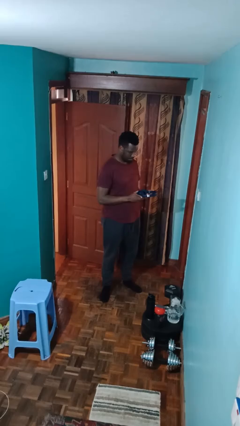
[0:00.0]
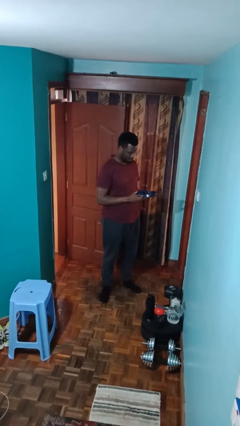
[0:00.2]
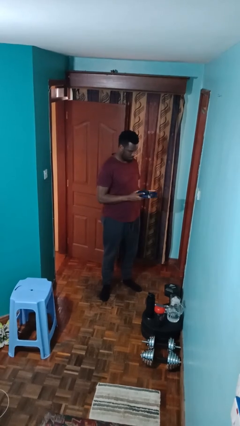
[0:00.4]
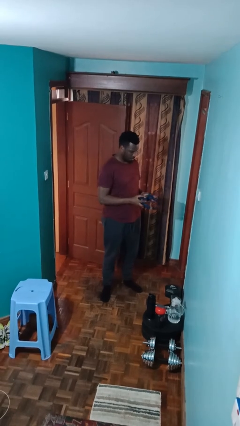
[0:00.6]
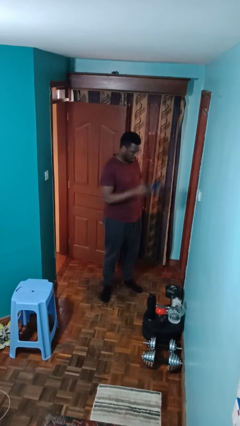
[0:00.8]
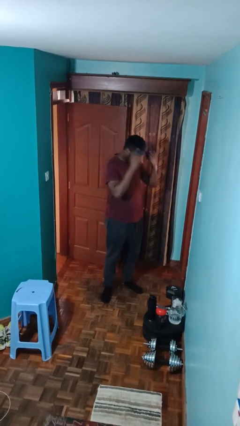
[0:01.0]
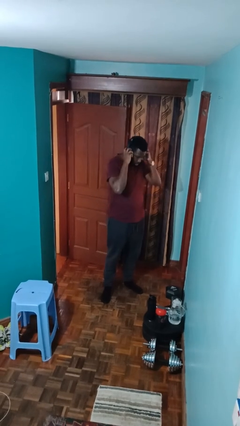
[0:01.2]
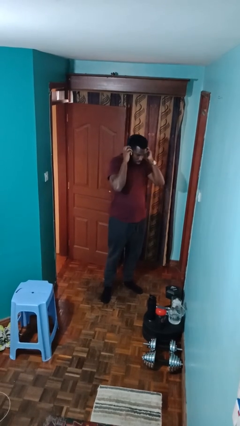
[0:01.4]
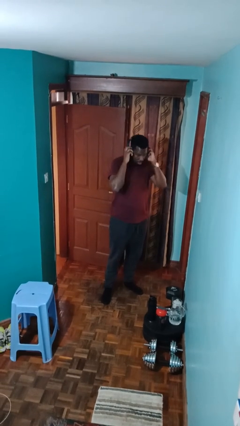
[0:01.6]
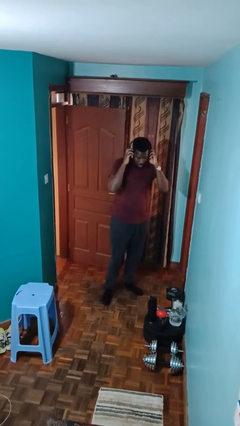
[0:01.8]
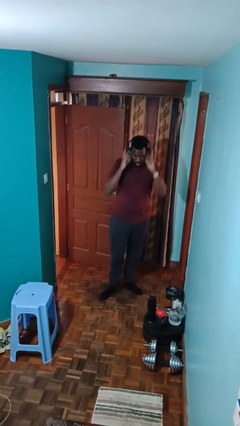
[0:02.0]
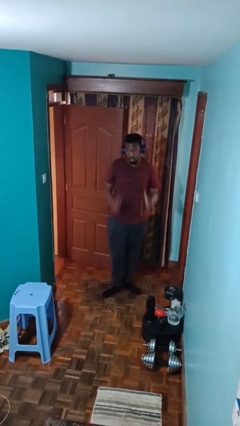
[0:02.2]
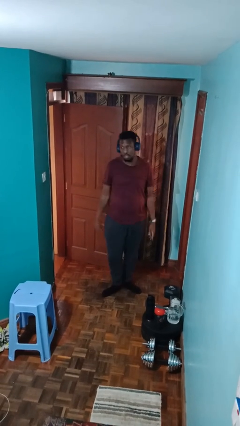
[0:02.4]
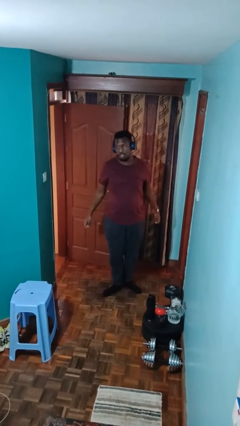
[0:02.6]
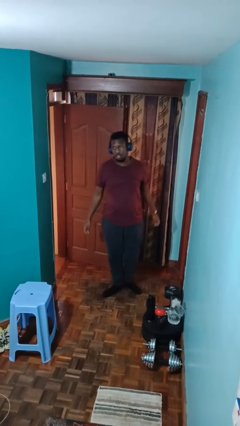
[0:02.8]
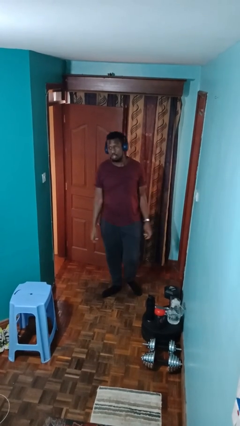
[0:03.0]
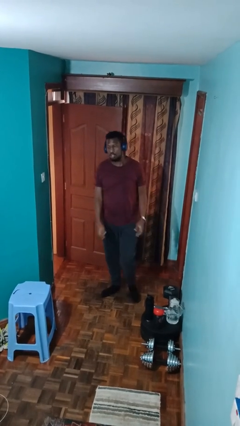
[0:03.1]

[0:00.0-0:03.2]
person puts on headphones

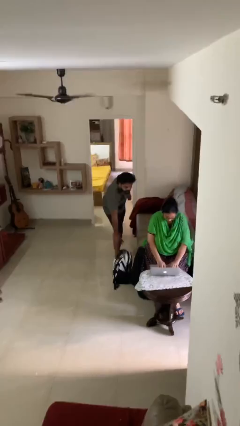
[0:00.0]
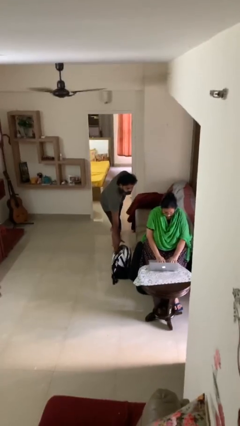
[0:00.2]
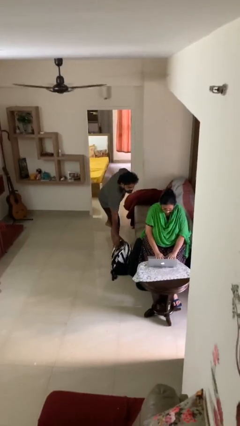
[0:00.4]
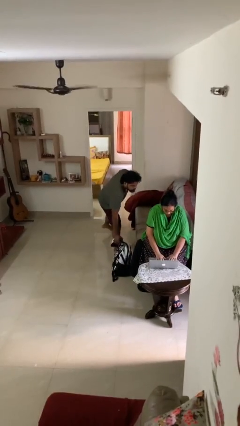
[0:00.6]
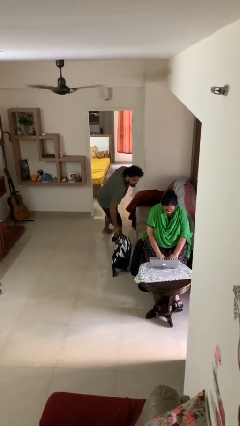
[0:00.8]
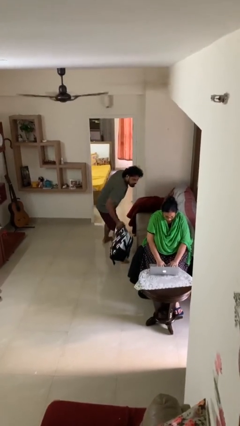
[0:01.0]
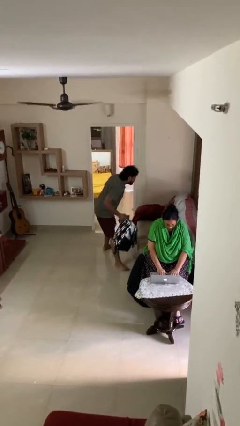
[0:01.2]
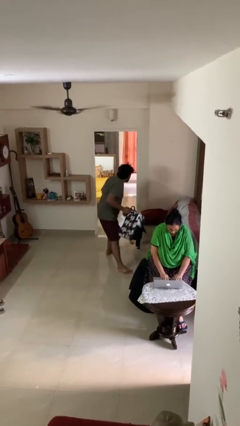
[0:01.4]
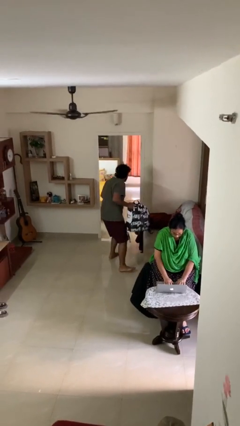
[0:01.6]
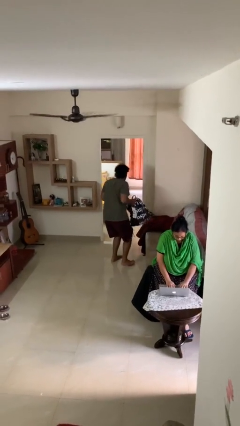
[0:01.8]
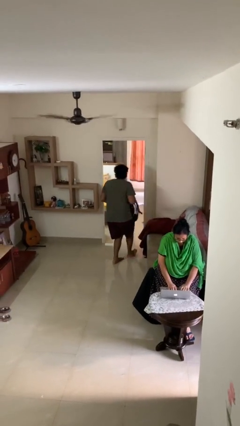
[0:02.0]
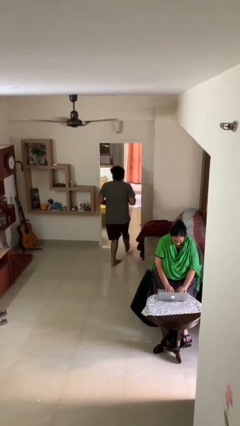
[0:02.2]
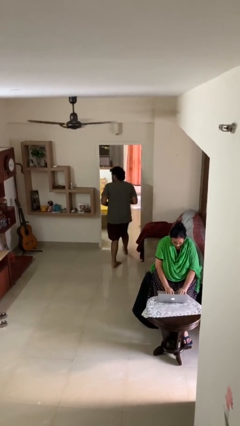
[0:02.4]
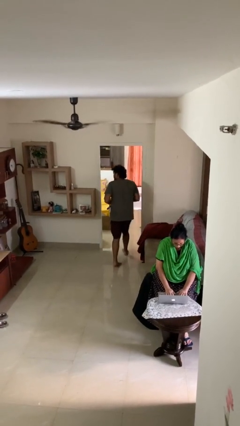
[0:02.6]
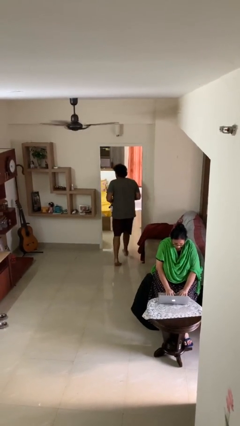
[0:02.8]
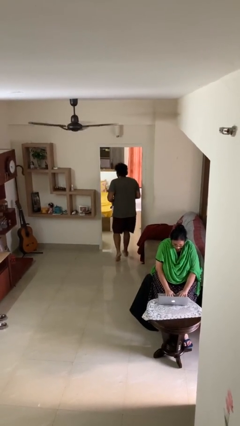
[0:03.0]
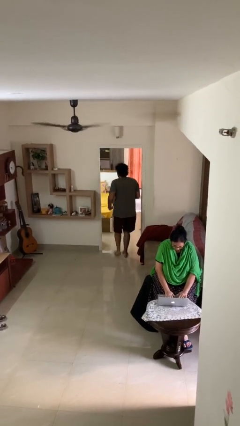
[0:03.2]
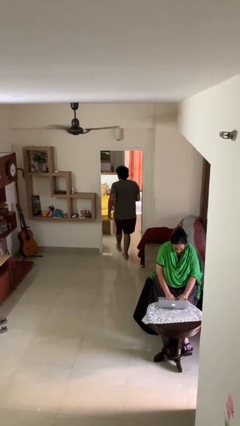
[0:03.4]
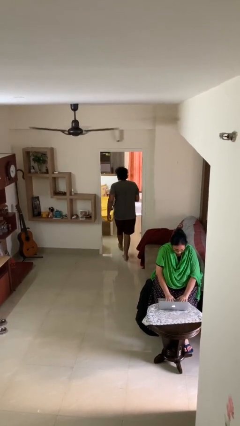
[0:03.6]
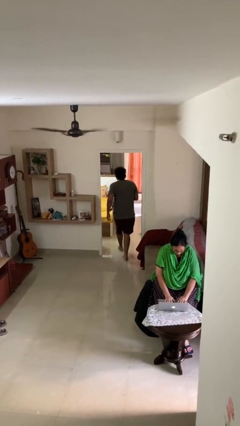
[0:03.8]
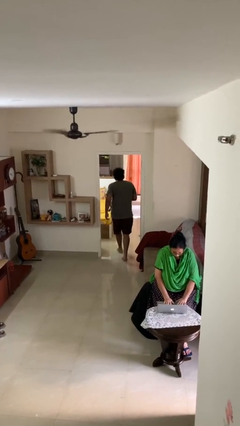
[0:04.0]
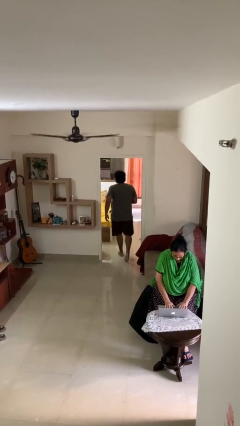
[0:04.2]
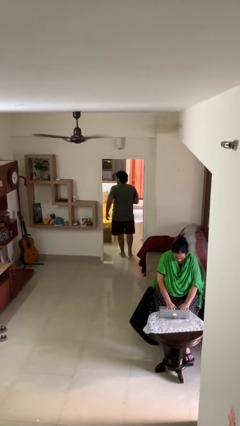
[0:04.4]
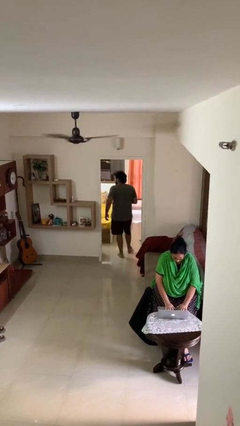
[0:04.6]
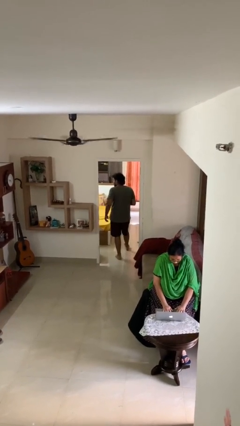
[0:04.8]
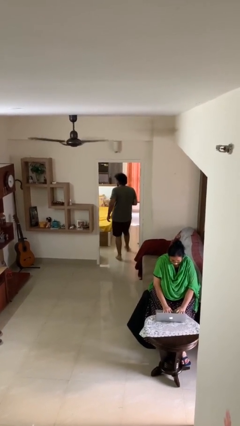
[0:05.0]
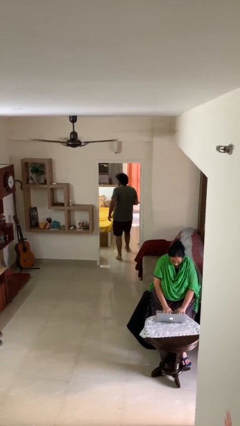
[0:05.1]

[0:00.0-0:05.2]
person steals object from person

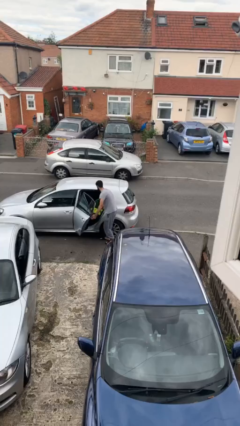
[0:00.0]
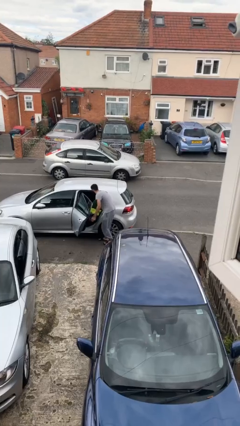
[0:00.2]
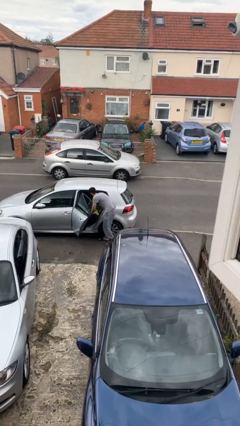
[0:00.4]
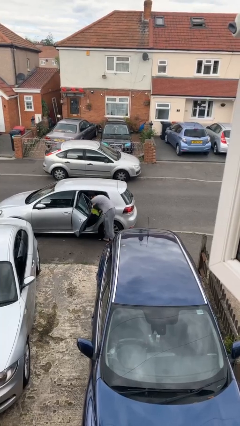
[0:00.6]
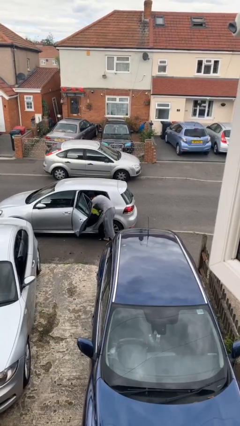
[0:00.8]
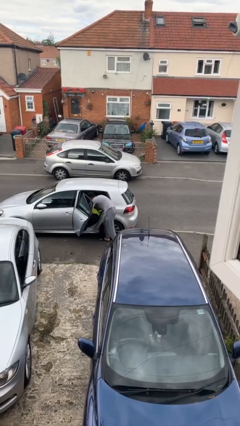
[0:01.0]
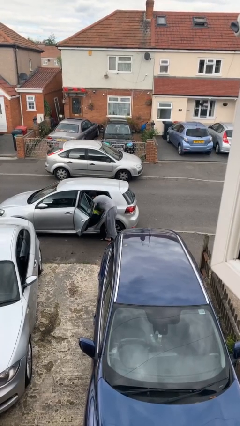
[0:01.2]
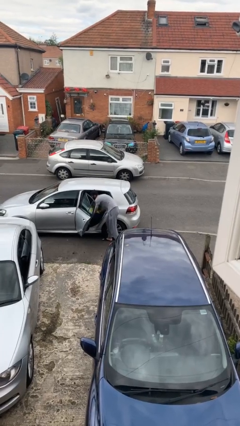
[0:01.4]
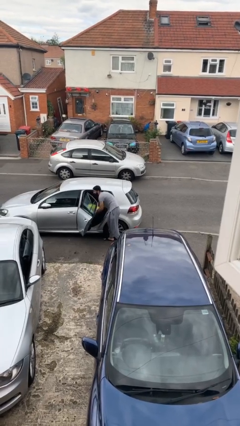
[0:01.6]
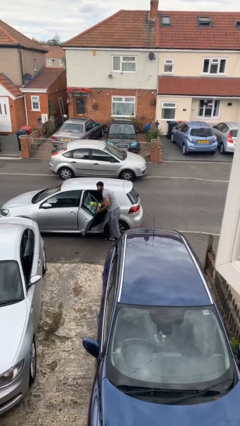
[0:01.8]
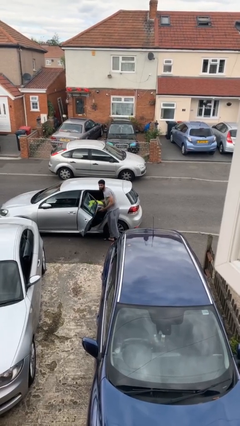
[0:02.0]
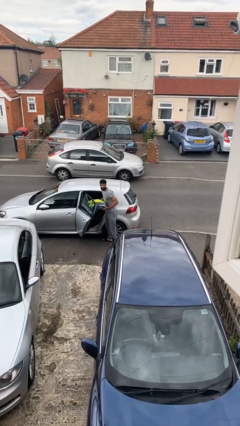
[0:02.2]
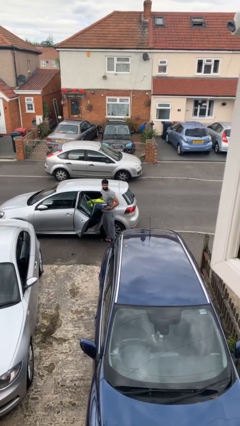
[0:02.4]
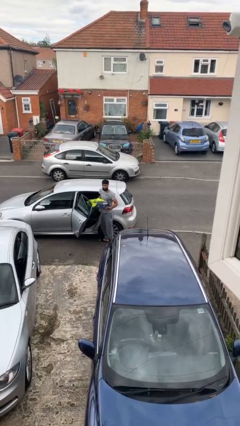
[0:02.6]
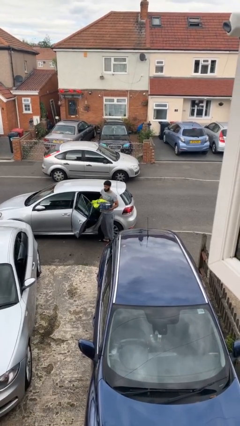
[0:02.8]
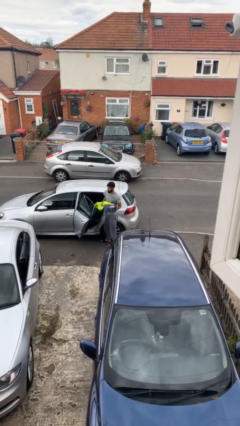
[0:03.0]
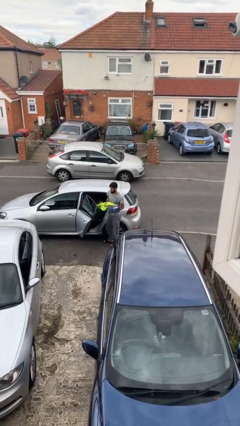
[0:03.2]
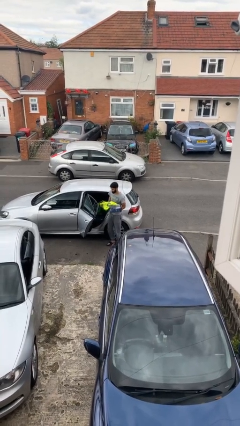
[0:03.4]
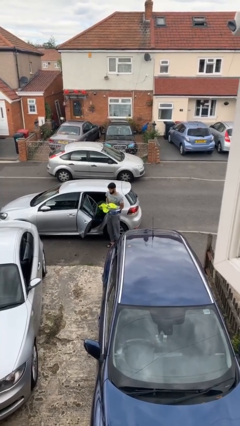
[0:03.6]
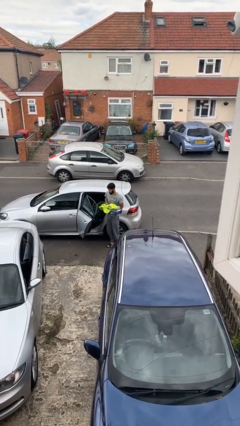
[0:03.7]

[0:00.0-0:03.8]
person unloads car

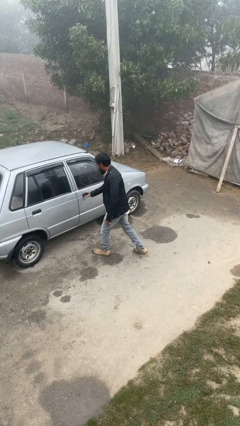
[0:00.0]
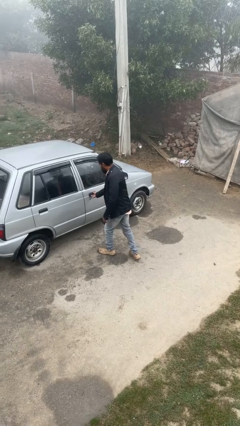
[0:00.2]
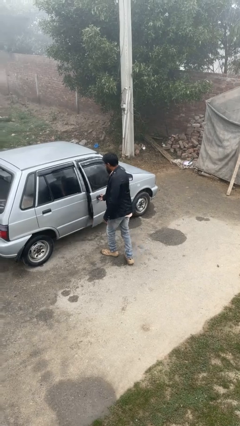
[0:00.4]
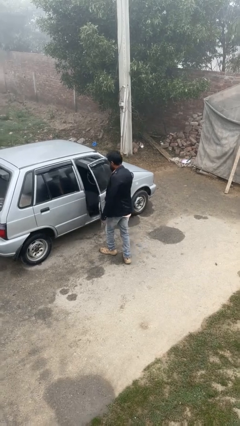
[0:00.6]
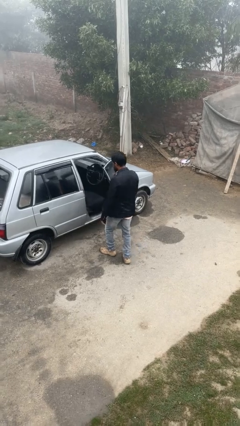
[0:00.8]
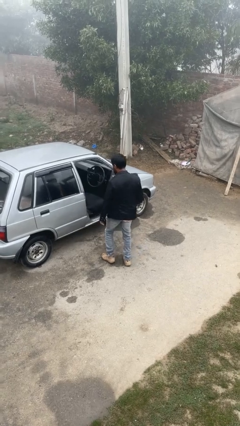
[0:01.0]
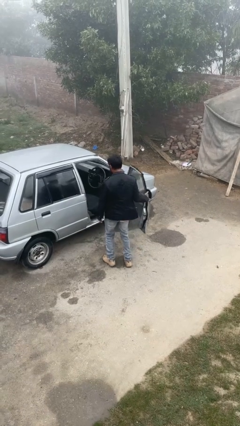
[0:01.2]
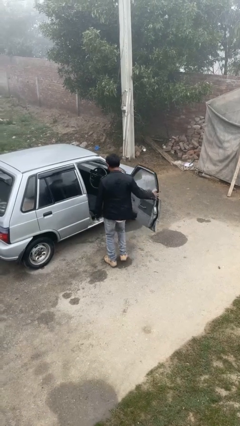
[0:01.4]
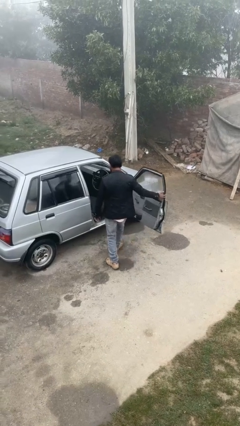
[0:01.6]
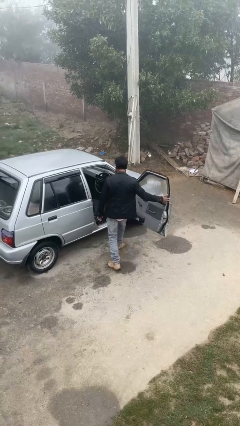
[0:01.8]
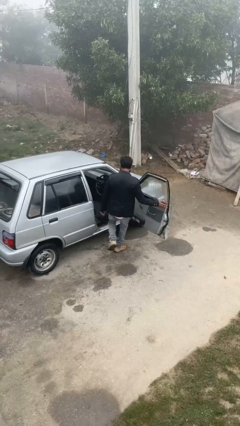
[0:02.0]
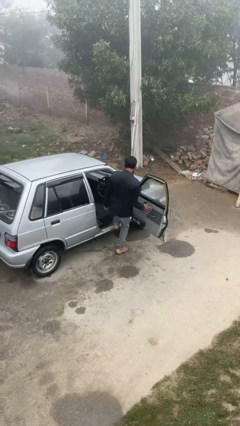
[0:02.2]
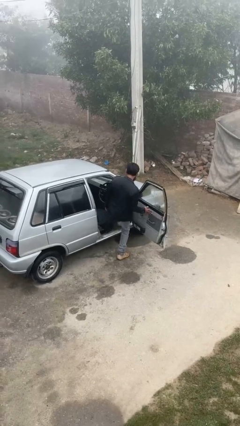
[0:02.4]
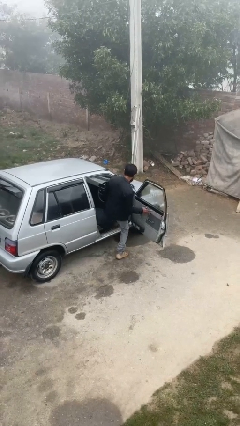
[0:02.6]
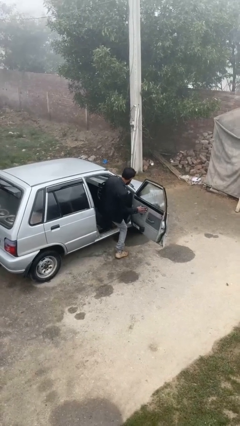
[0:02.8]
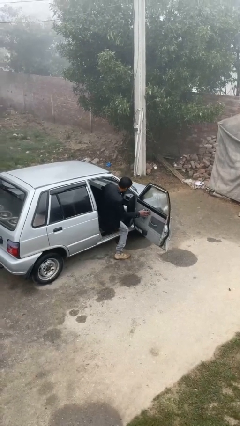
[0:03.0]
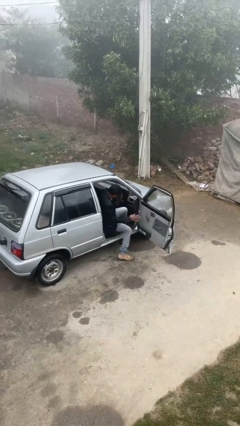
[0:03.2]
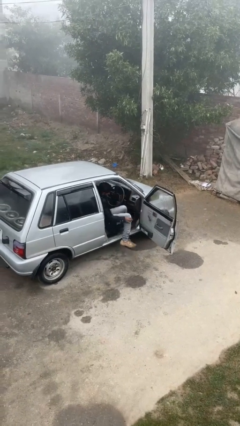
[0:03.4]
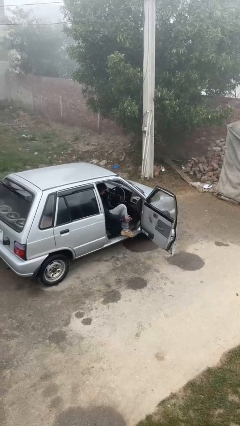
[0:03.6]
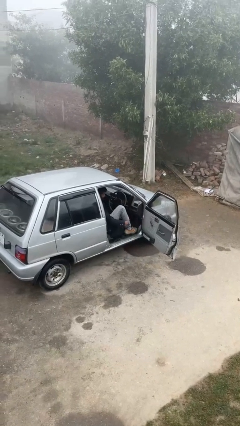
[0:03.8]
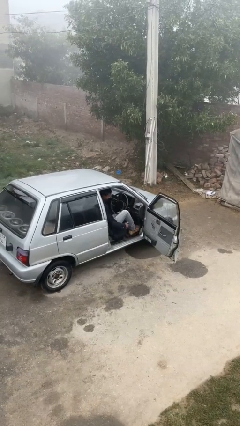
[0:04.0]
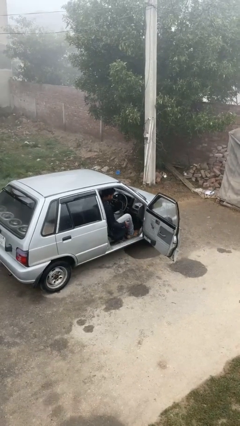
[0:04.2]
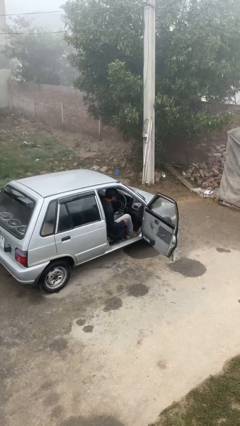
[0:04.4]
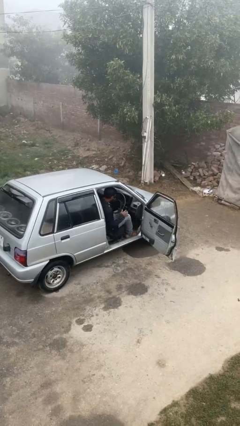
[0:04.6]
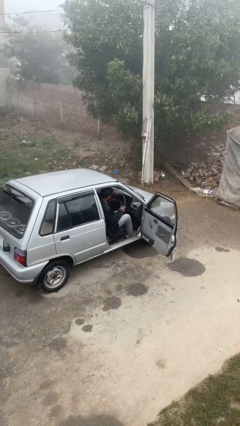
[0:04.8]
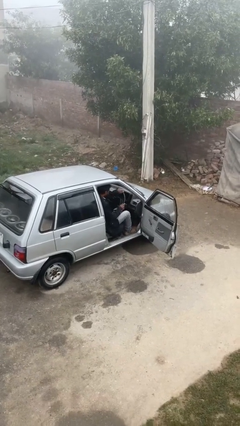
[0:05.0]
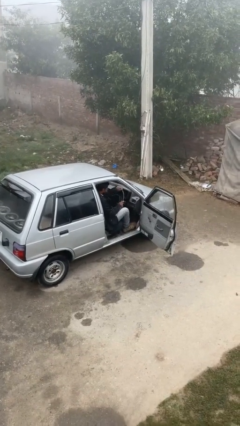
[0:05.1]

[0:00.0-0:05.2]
person enters car

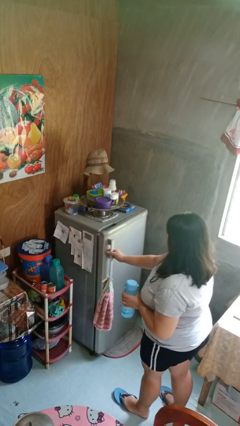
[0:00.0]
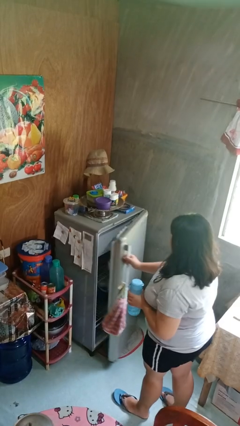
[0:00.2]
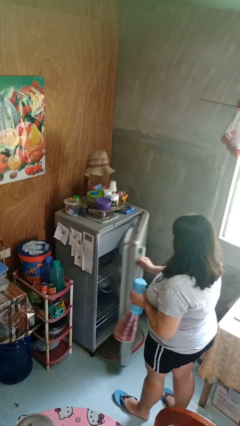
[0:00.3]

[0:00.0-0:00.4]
person opens refrigerator
